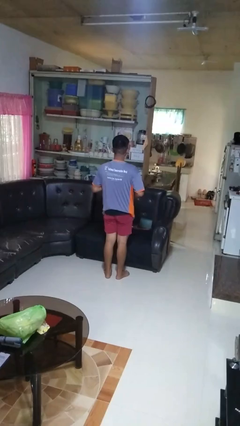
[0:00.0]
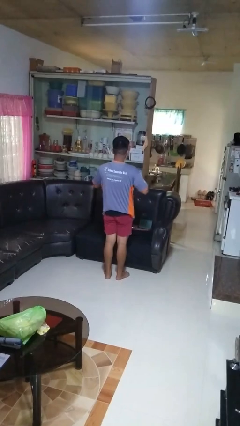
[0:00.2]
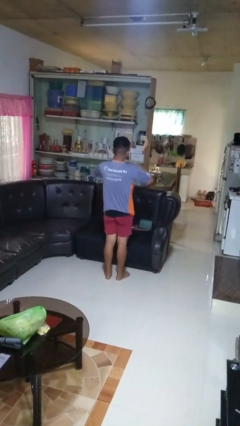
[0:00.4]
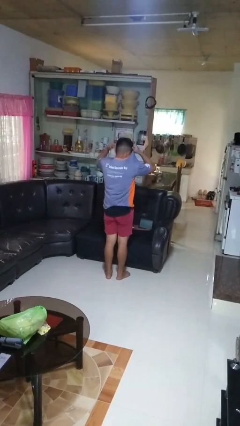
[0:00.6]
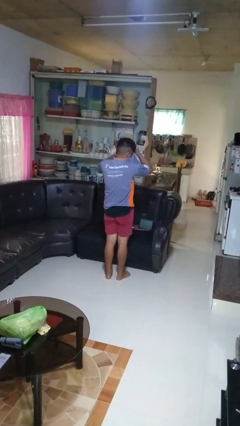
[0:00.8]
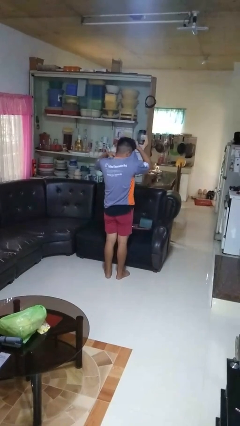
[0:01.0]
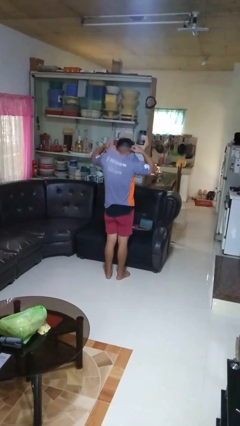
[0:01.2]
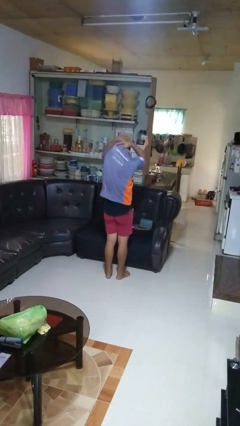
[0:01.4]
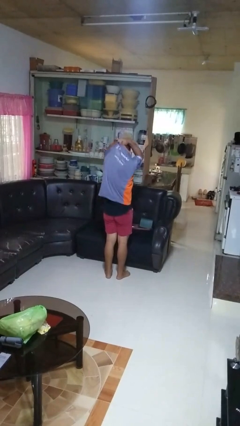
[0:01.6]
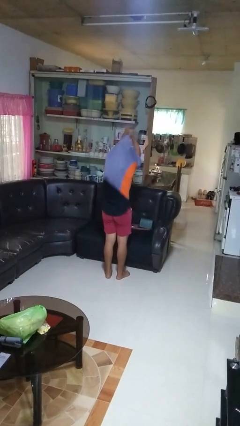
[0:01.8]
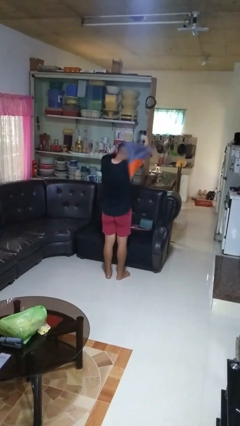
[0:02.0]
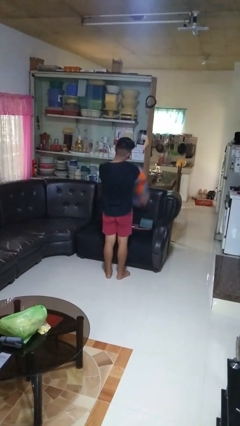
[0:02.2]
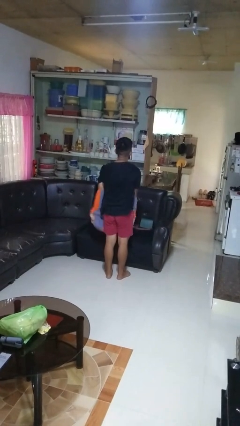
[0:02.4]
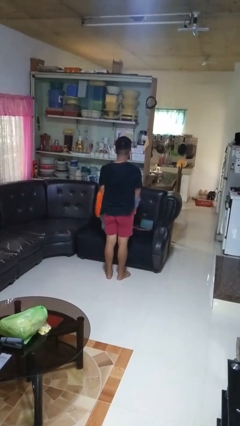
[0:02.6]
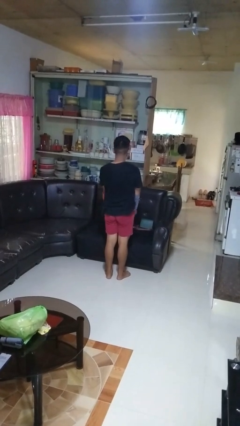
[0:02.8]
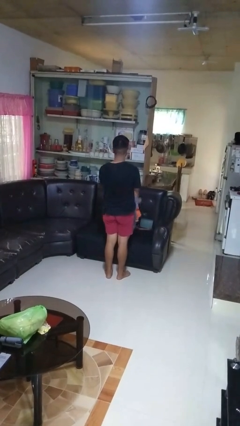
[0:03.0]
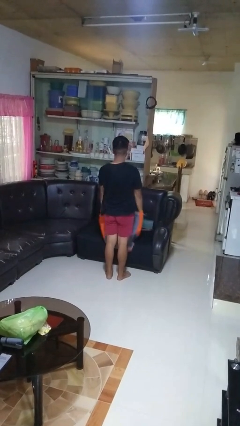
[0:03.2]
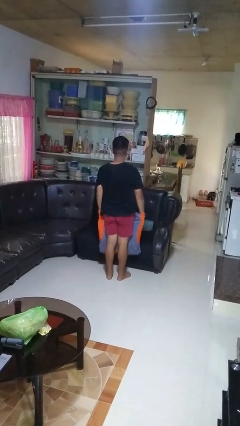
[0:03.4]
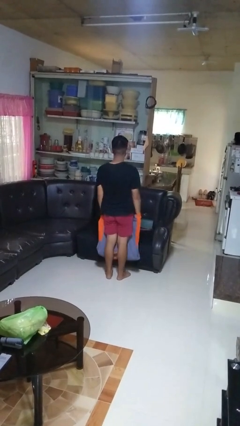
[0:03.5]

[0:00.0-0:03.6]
person takes off shirt

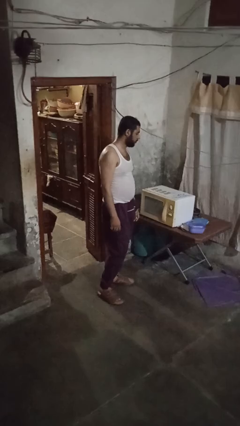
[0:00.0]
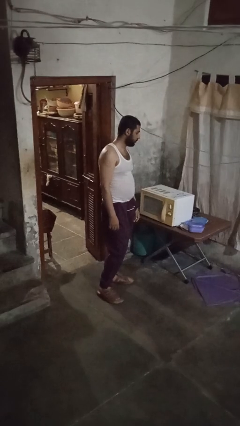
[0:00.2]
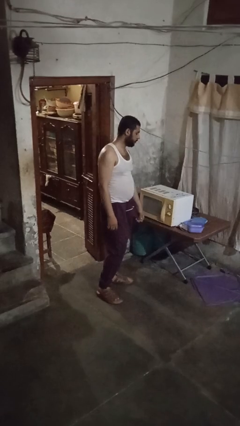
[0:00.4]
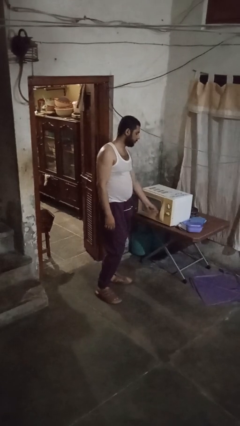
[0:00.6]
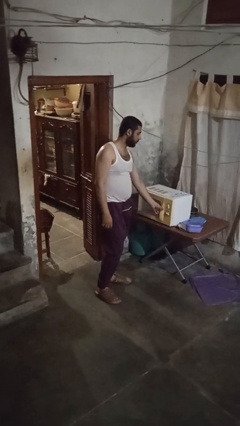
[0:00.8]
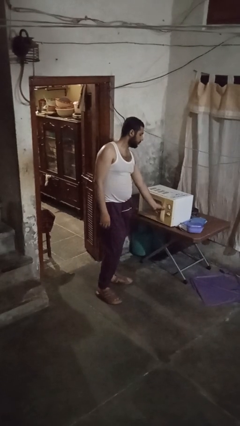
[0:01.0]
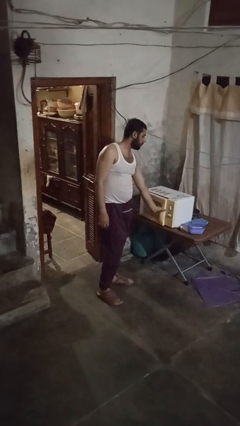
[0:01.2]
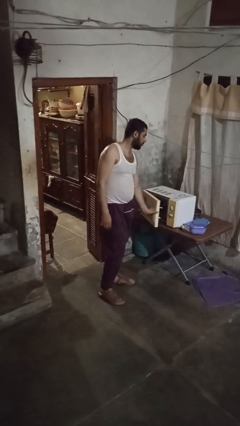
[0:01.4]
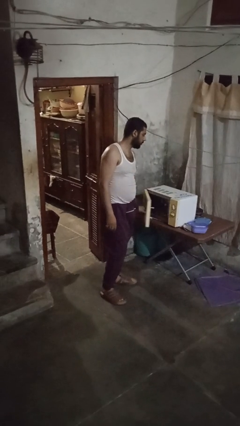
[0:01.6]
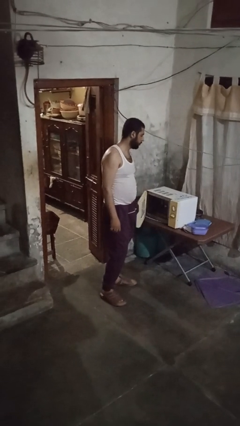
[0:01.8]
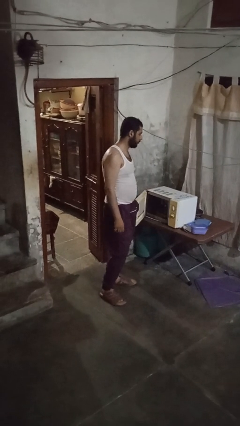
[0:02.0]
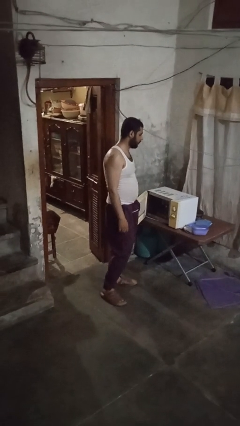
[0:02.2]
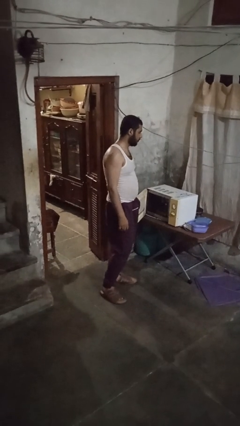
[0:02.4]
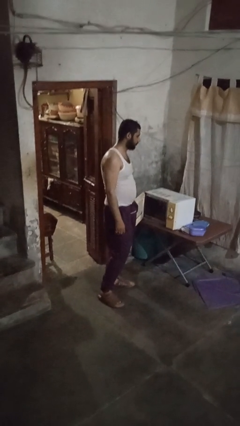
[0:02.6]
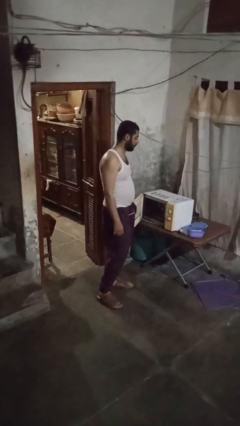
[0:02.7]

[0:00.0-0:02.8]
person opens microwave

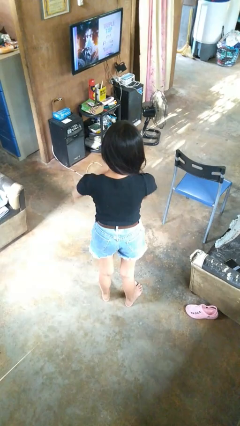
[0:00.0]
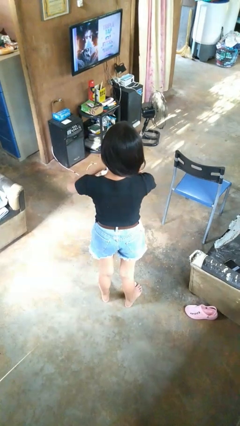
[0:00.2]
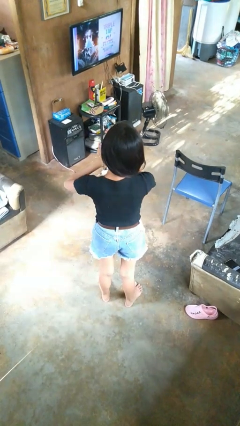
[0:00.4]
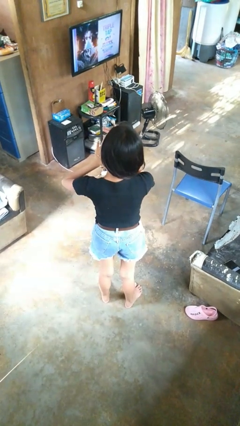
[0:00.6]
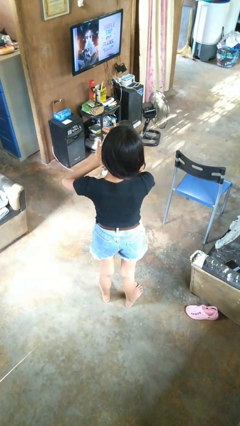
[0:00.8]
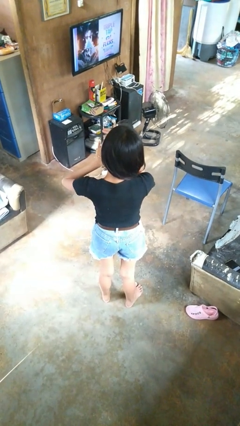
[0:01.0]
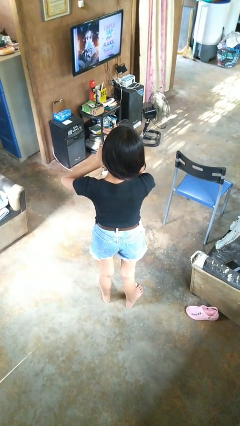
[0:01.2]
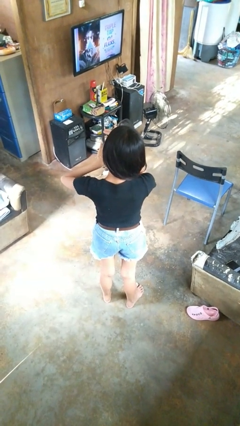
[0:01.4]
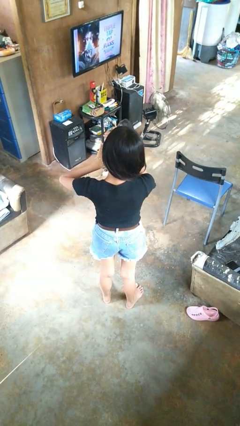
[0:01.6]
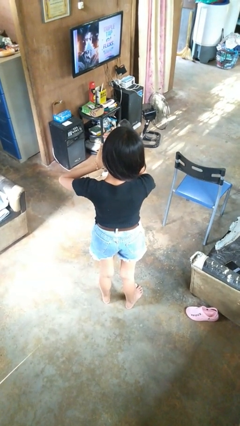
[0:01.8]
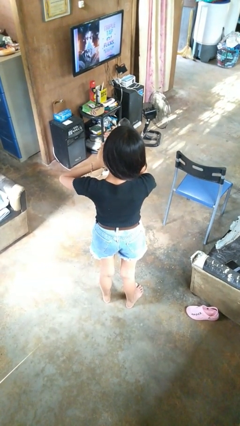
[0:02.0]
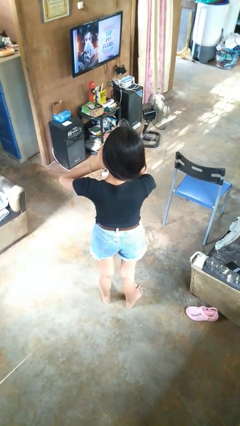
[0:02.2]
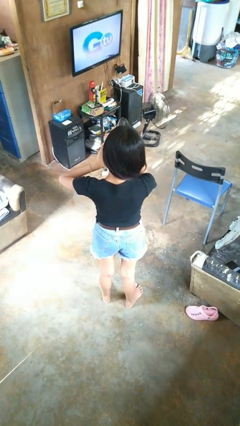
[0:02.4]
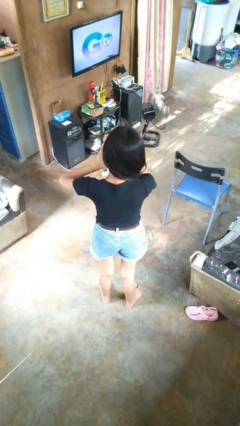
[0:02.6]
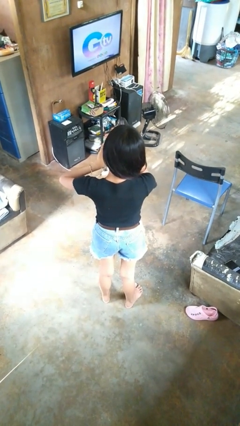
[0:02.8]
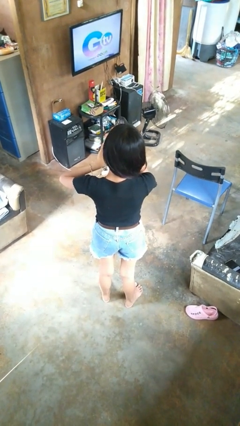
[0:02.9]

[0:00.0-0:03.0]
person clips fingernails

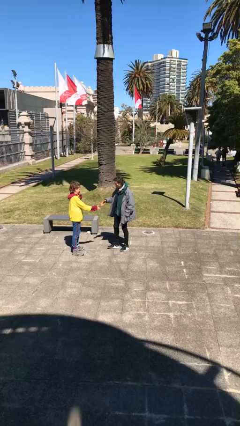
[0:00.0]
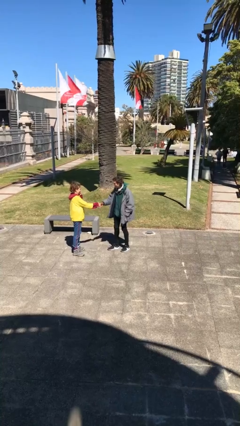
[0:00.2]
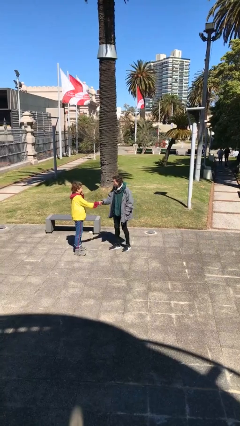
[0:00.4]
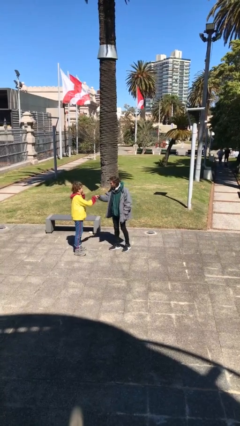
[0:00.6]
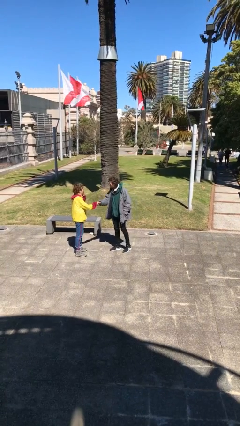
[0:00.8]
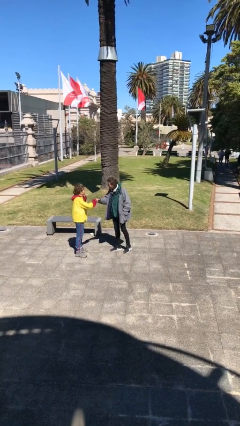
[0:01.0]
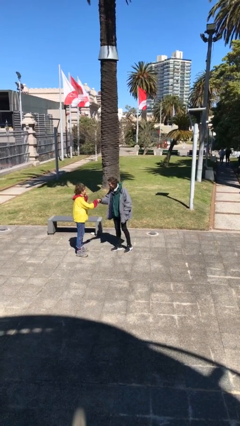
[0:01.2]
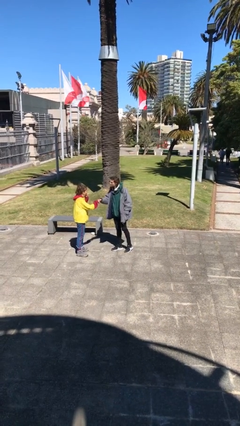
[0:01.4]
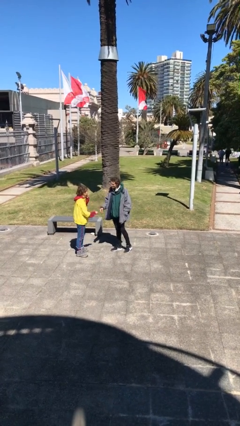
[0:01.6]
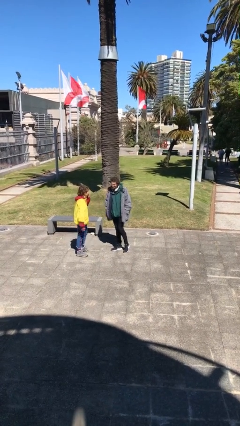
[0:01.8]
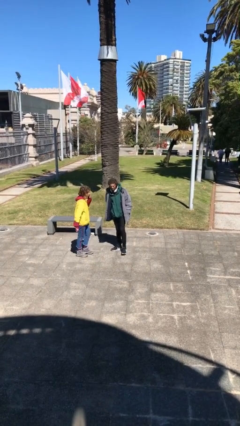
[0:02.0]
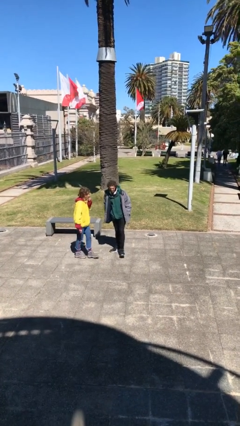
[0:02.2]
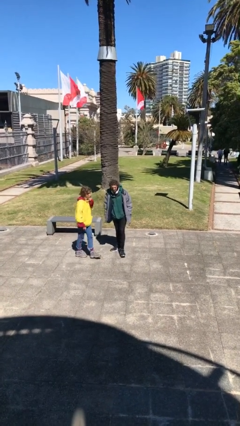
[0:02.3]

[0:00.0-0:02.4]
person shakes hand

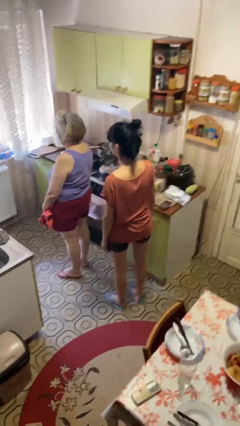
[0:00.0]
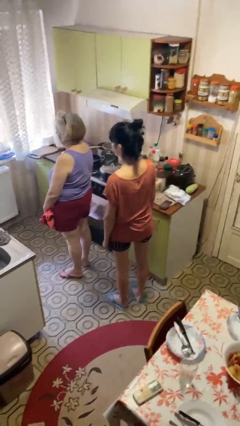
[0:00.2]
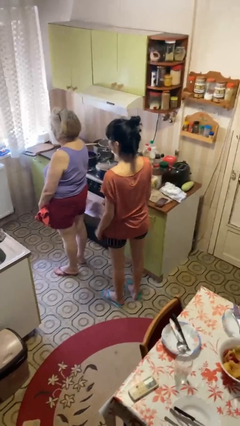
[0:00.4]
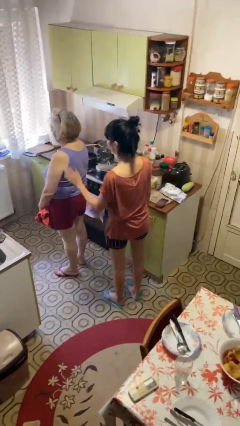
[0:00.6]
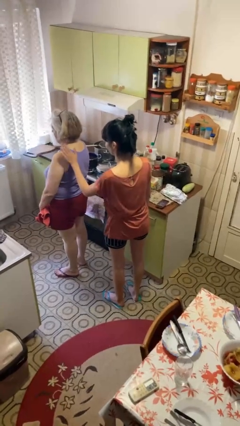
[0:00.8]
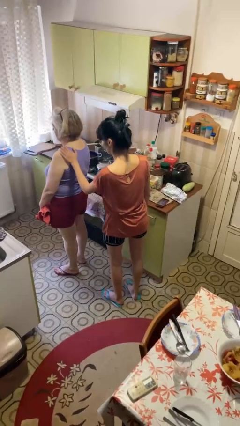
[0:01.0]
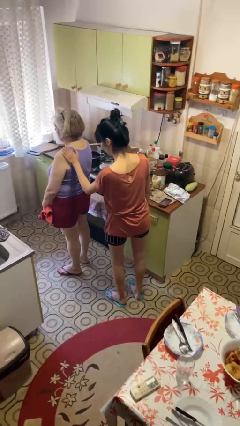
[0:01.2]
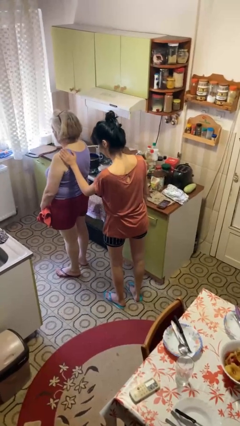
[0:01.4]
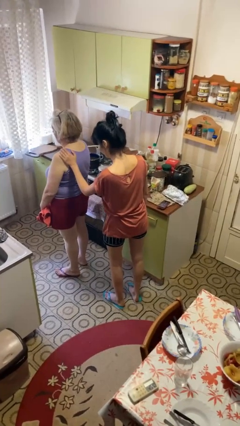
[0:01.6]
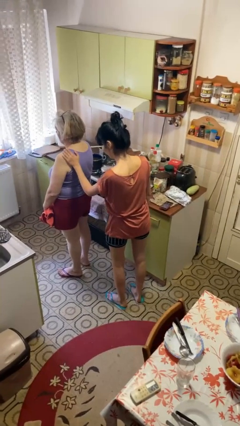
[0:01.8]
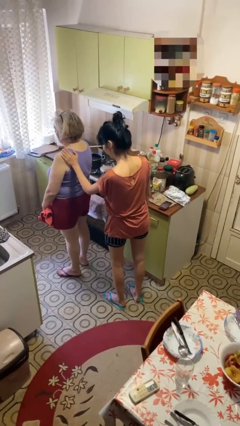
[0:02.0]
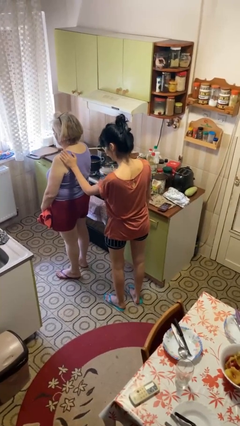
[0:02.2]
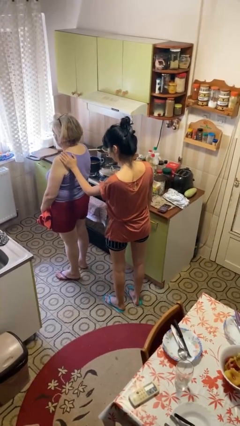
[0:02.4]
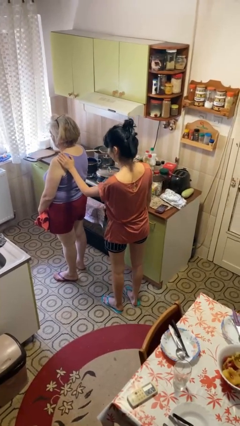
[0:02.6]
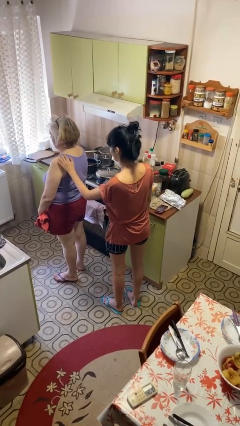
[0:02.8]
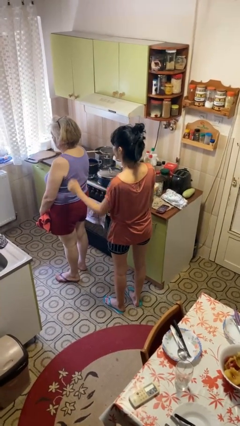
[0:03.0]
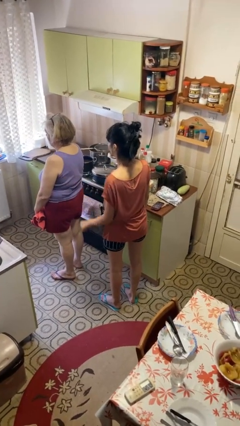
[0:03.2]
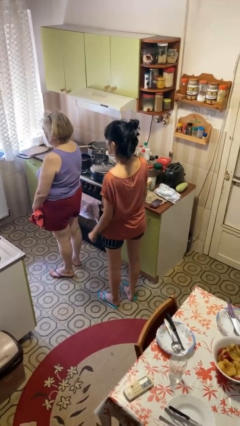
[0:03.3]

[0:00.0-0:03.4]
person touches back of person

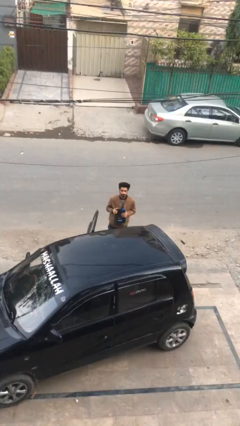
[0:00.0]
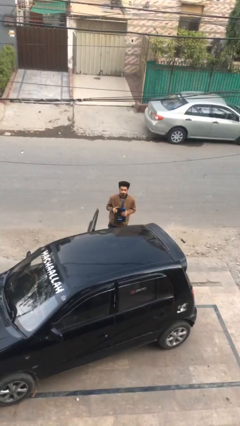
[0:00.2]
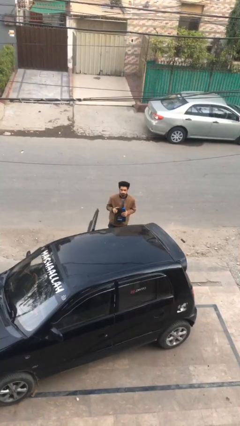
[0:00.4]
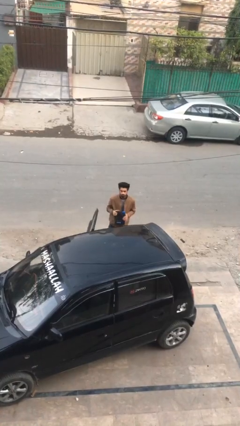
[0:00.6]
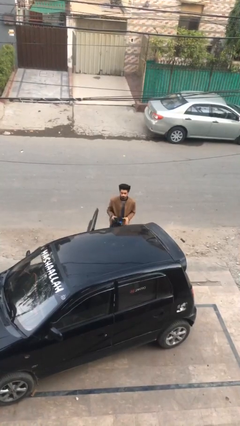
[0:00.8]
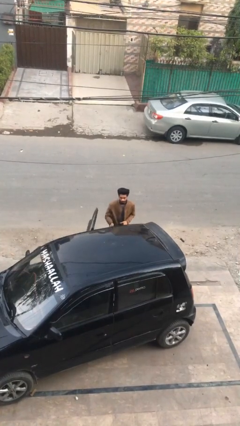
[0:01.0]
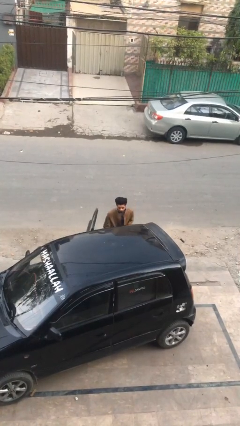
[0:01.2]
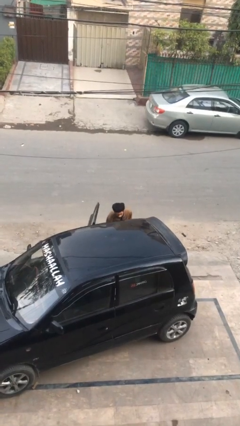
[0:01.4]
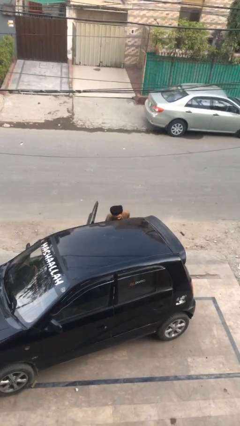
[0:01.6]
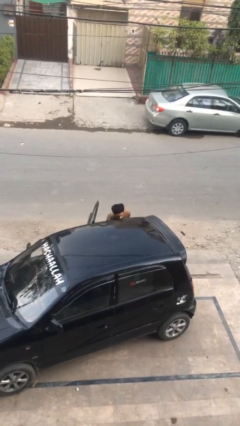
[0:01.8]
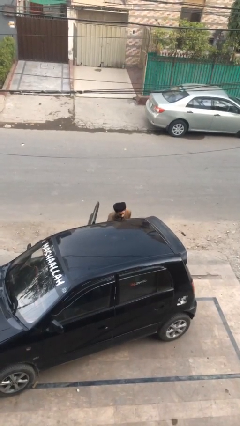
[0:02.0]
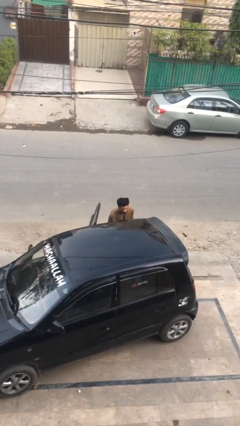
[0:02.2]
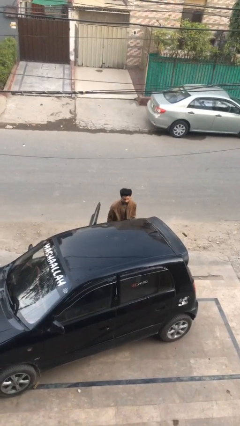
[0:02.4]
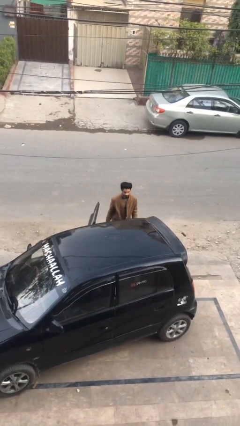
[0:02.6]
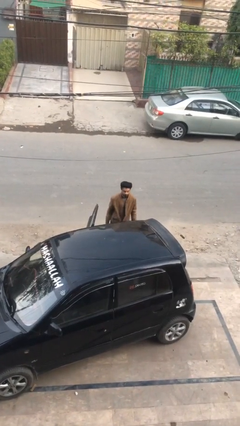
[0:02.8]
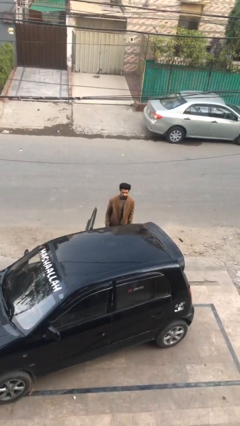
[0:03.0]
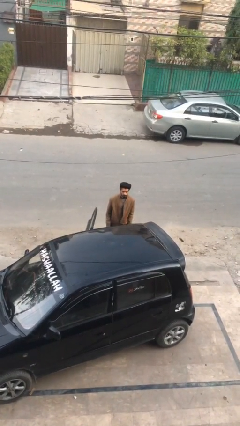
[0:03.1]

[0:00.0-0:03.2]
person loads car
